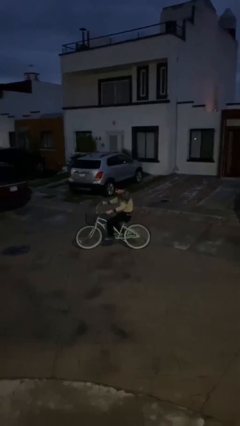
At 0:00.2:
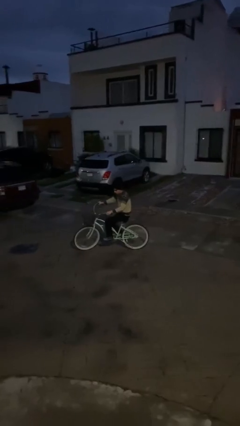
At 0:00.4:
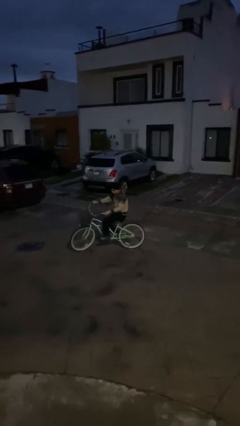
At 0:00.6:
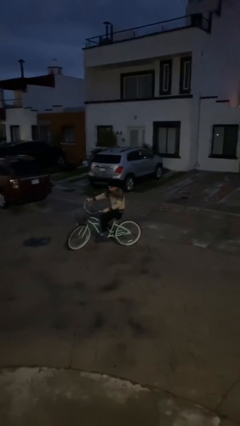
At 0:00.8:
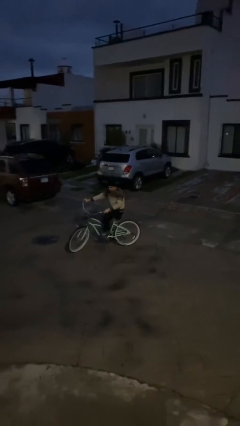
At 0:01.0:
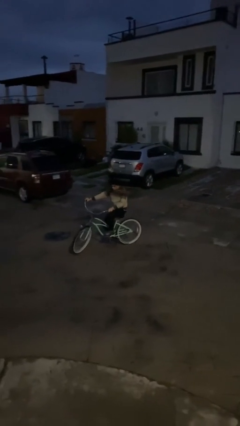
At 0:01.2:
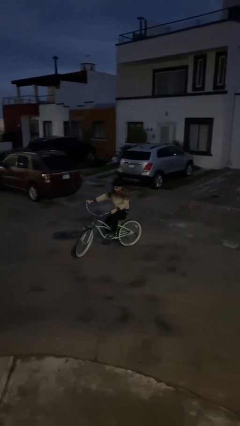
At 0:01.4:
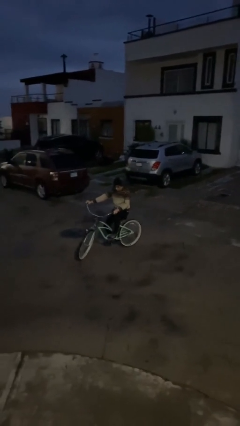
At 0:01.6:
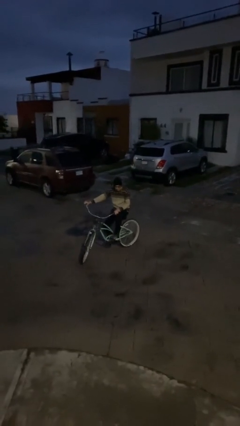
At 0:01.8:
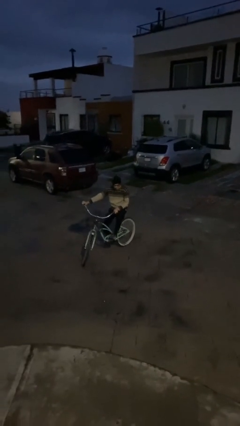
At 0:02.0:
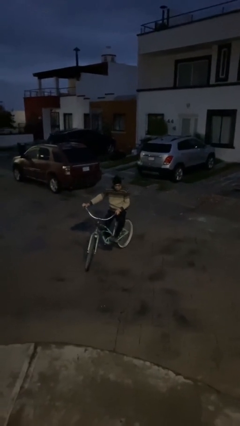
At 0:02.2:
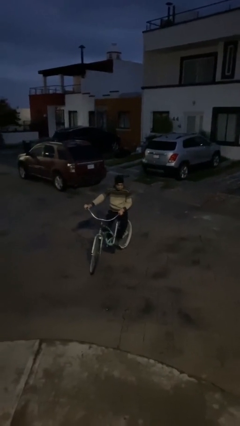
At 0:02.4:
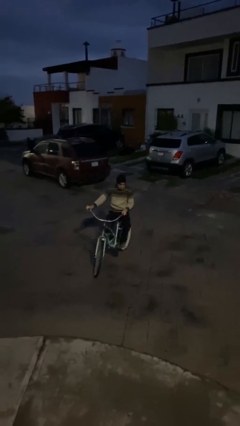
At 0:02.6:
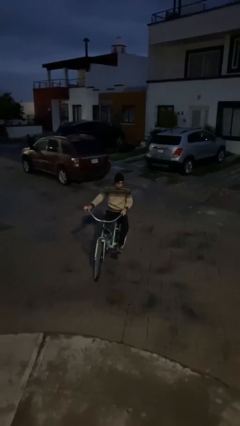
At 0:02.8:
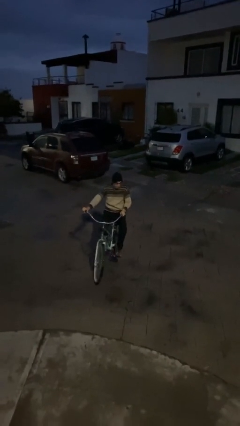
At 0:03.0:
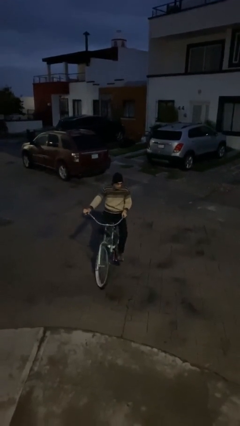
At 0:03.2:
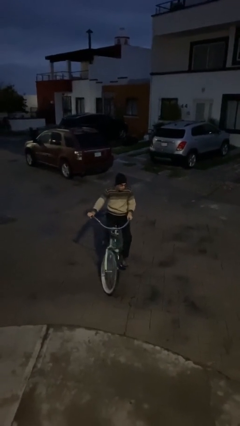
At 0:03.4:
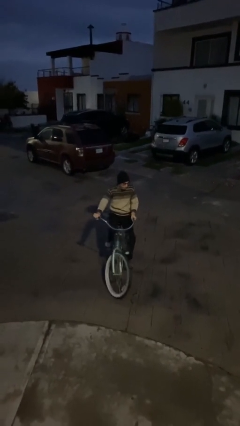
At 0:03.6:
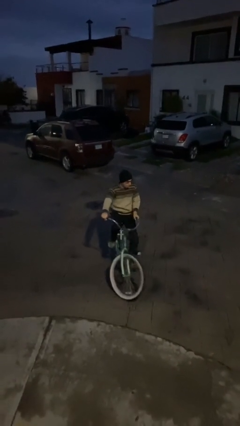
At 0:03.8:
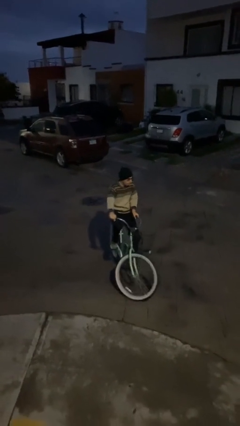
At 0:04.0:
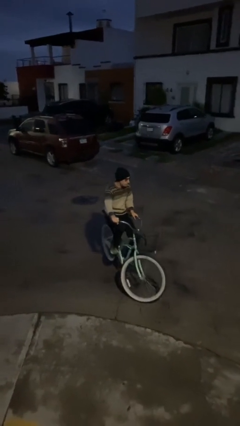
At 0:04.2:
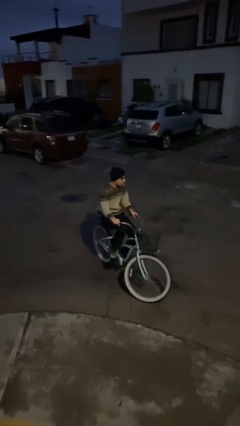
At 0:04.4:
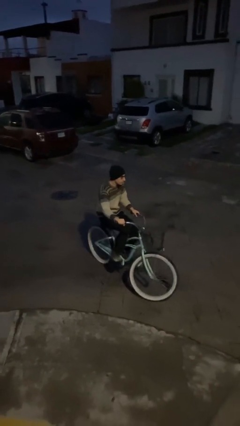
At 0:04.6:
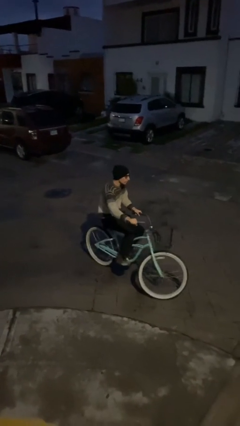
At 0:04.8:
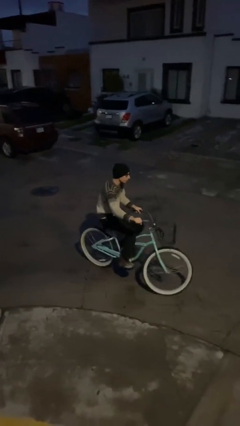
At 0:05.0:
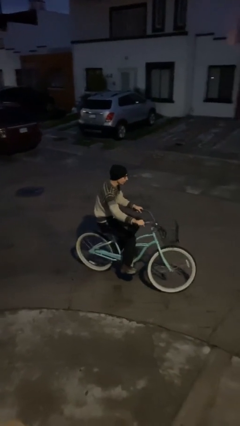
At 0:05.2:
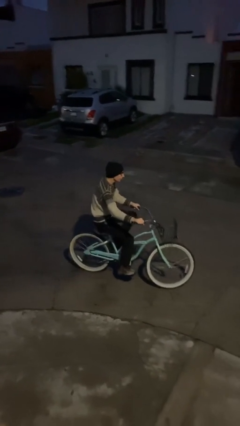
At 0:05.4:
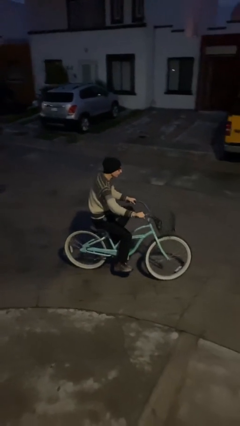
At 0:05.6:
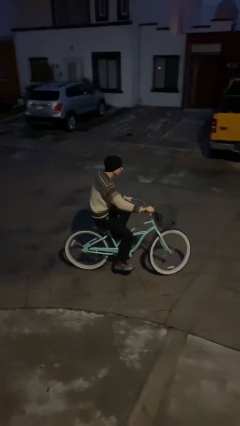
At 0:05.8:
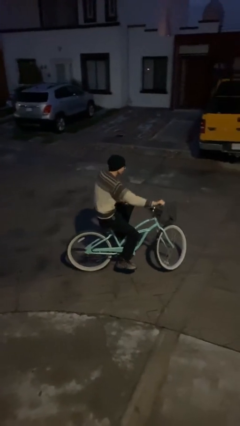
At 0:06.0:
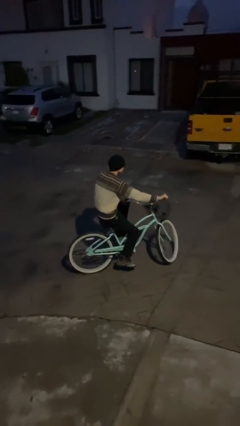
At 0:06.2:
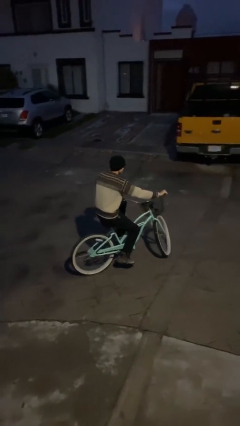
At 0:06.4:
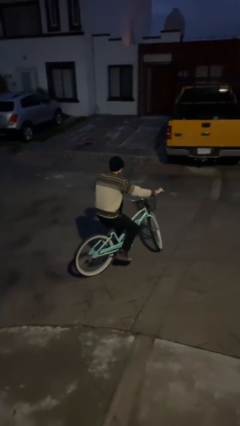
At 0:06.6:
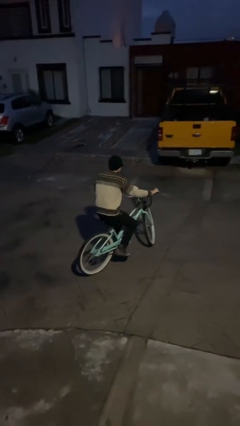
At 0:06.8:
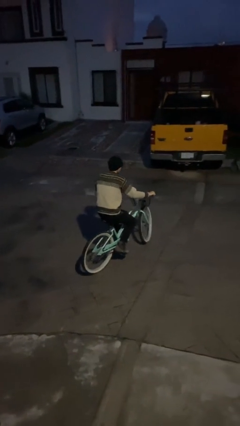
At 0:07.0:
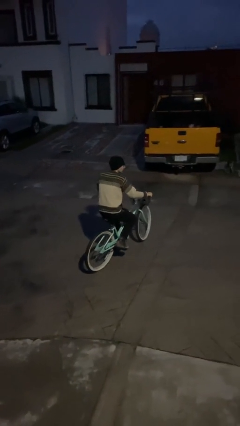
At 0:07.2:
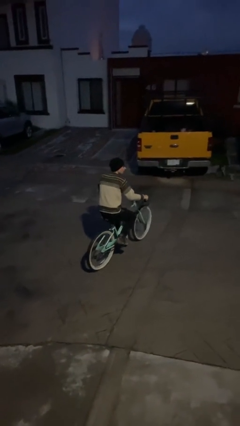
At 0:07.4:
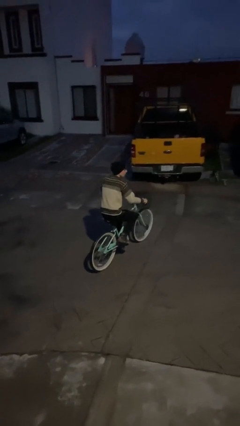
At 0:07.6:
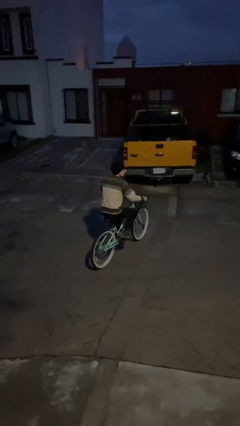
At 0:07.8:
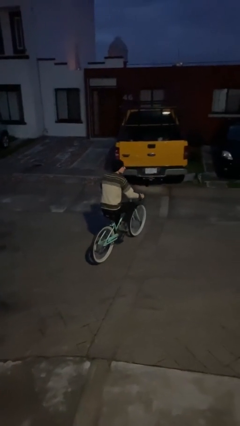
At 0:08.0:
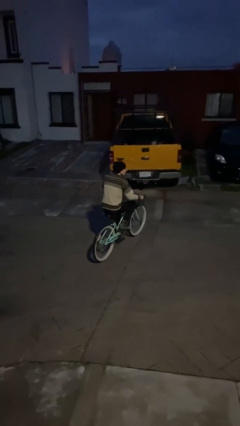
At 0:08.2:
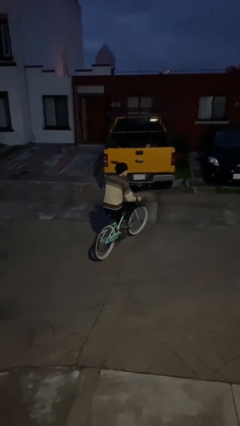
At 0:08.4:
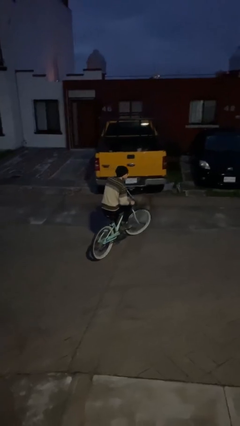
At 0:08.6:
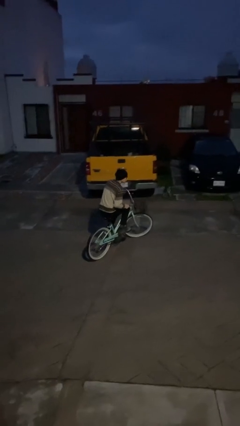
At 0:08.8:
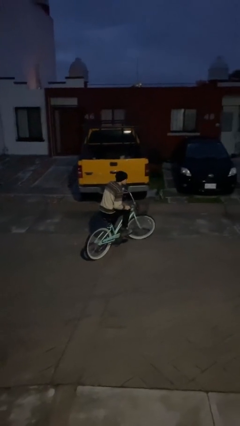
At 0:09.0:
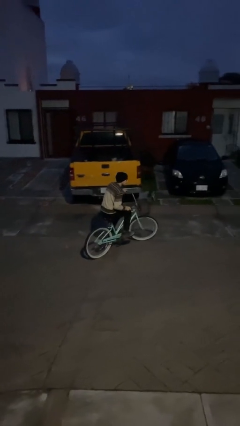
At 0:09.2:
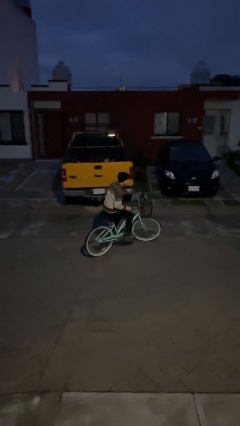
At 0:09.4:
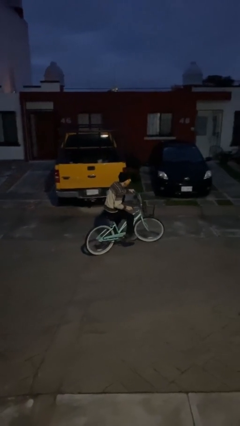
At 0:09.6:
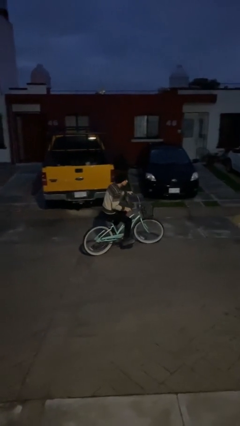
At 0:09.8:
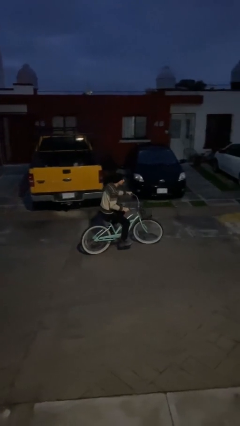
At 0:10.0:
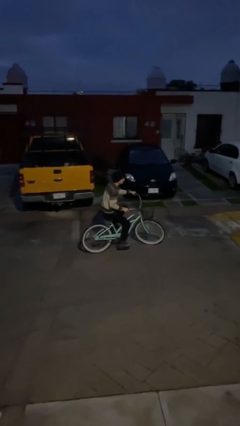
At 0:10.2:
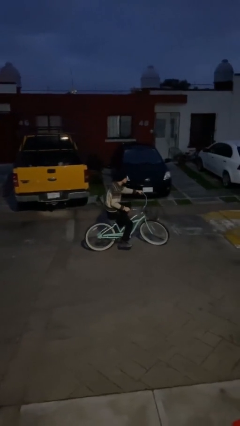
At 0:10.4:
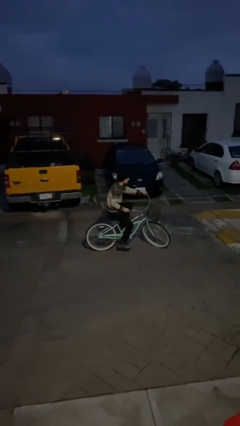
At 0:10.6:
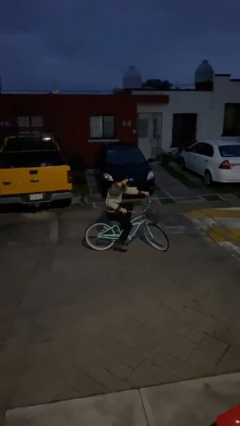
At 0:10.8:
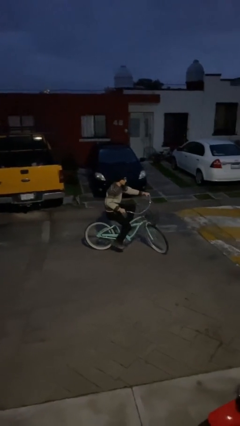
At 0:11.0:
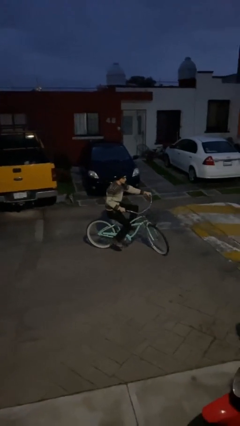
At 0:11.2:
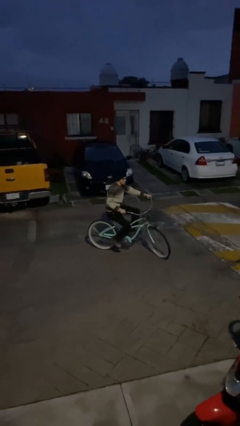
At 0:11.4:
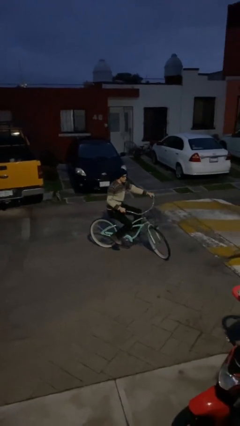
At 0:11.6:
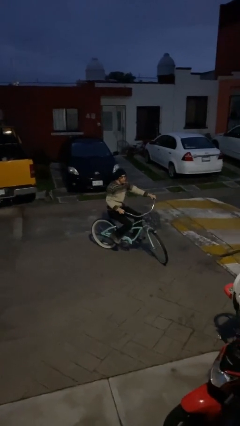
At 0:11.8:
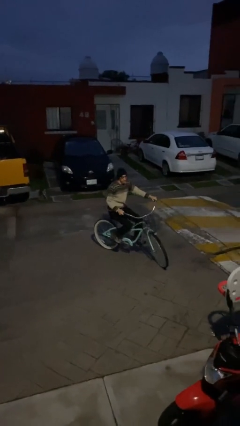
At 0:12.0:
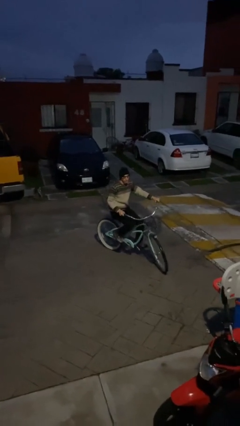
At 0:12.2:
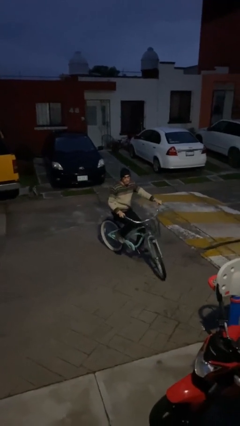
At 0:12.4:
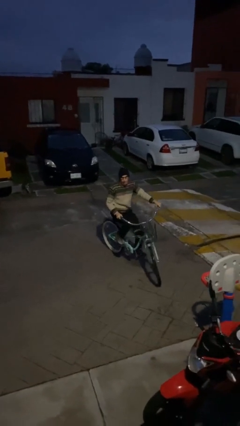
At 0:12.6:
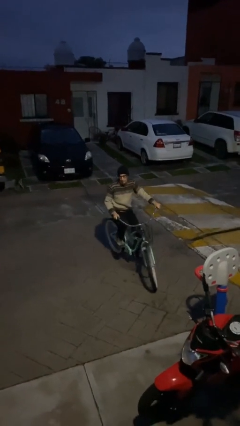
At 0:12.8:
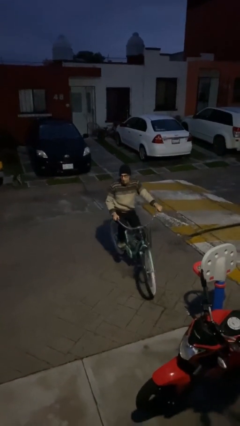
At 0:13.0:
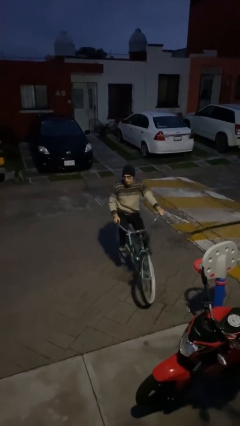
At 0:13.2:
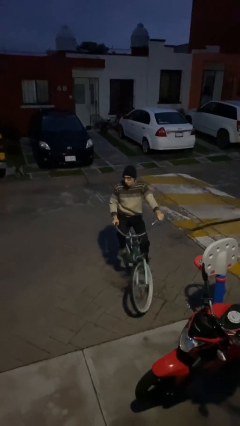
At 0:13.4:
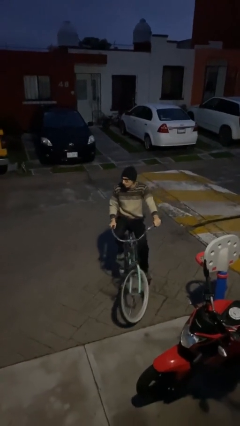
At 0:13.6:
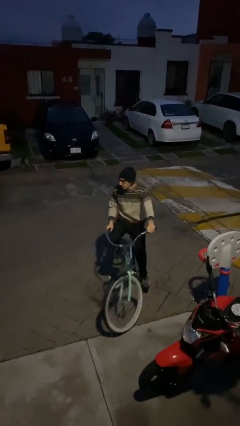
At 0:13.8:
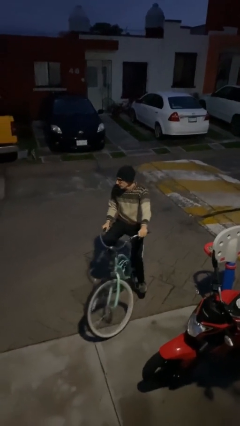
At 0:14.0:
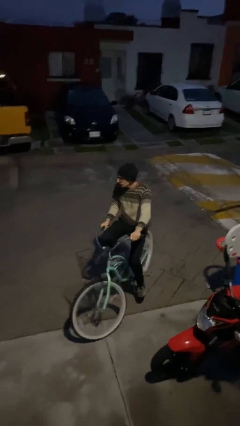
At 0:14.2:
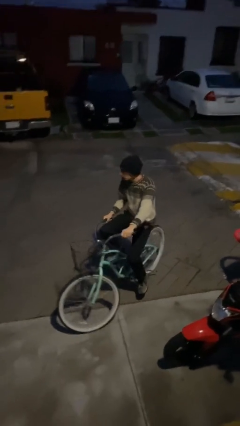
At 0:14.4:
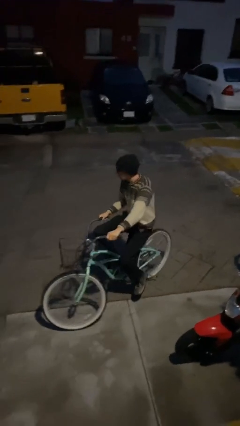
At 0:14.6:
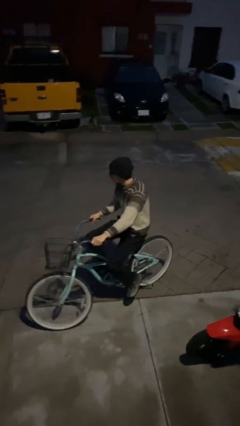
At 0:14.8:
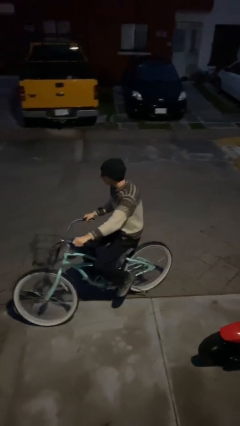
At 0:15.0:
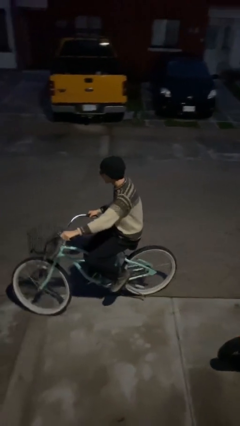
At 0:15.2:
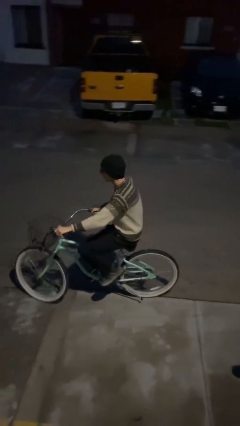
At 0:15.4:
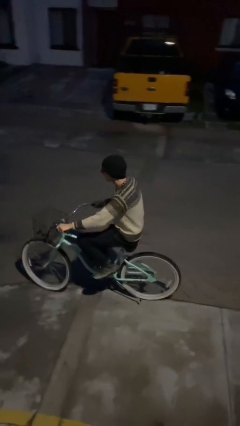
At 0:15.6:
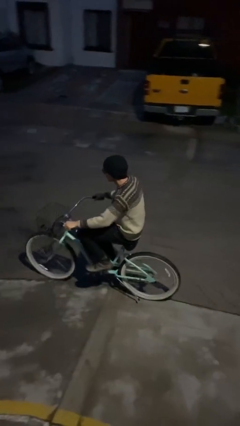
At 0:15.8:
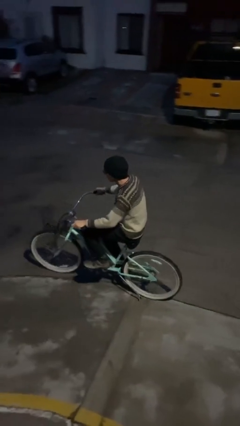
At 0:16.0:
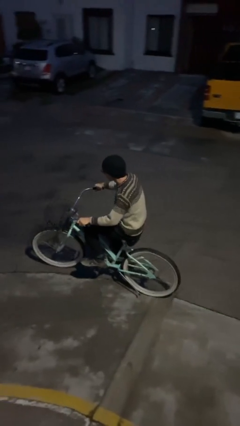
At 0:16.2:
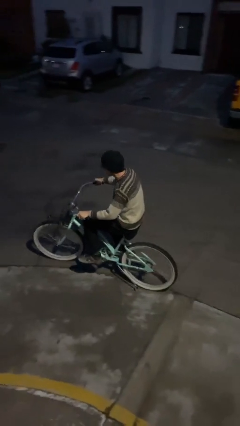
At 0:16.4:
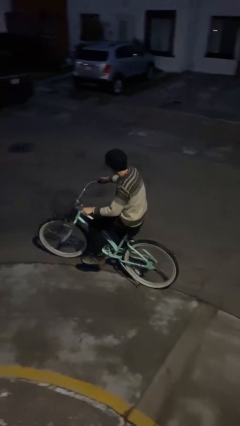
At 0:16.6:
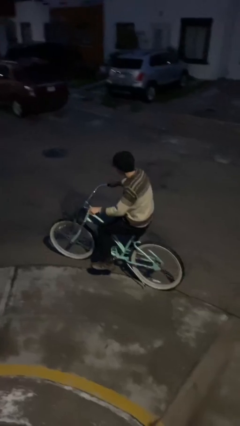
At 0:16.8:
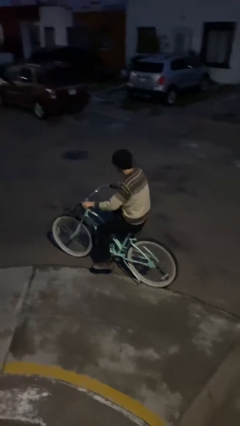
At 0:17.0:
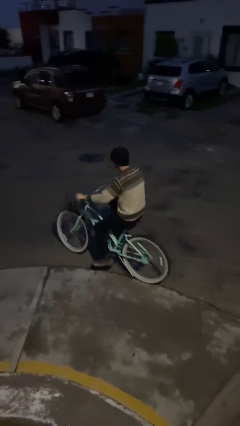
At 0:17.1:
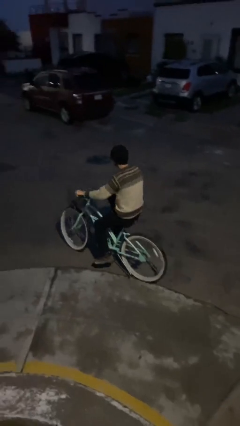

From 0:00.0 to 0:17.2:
person rides bicycle

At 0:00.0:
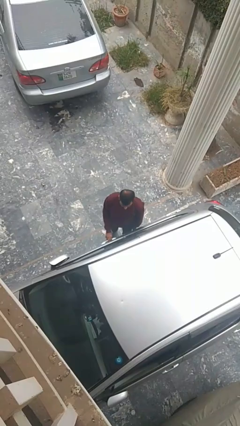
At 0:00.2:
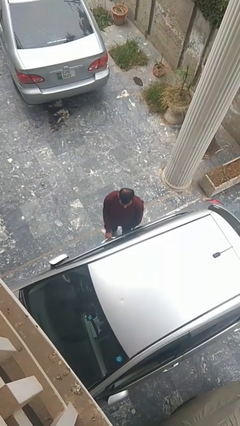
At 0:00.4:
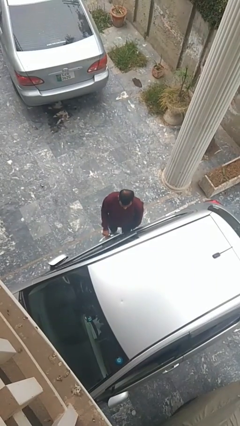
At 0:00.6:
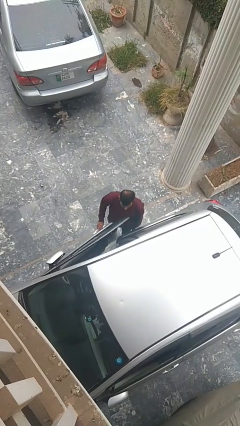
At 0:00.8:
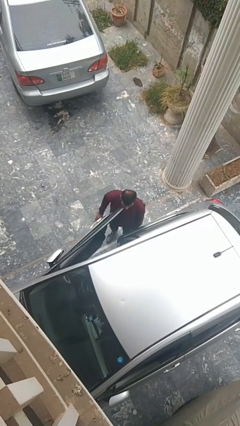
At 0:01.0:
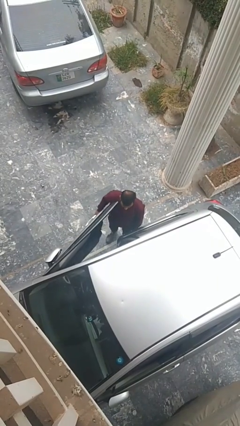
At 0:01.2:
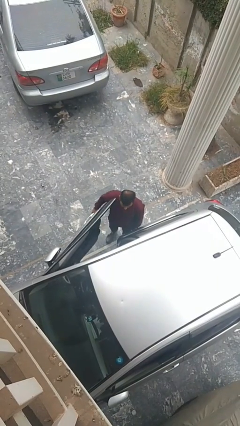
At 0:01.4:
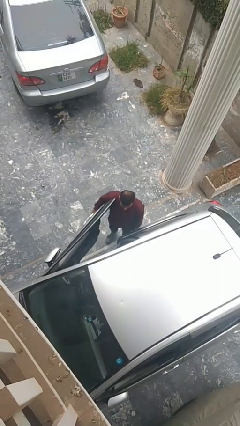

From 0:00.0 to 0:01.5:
person opens car door
